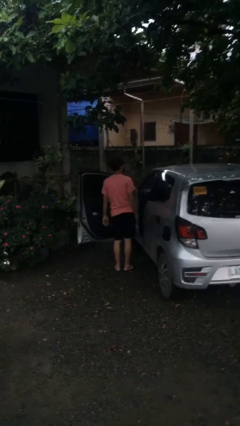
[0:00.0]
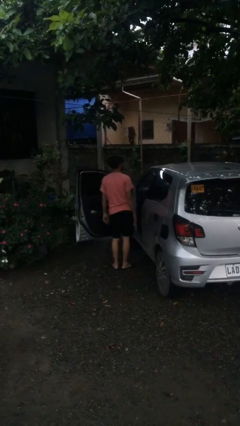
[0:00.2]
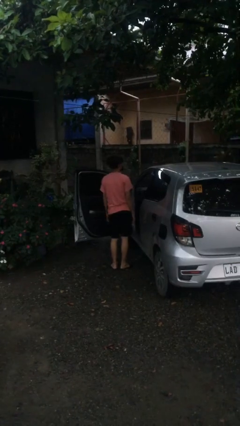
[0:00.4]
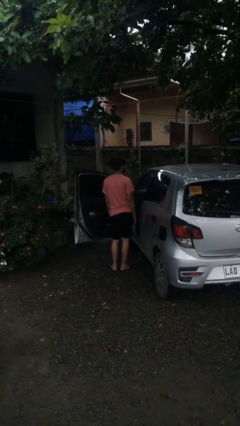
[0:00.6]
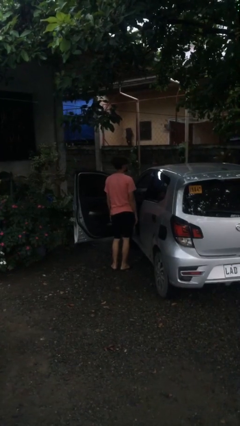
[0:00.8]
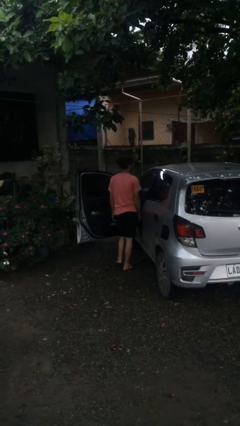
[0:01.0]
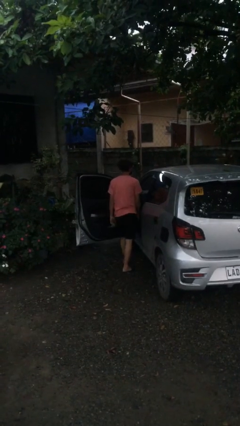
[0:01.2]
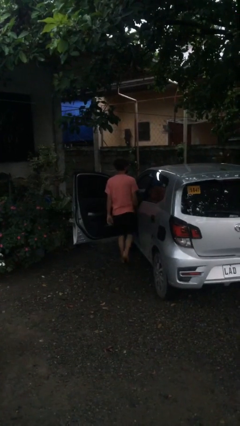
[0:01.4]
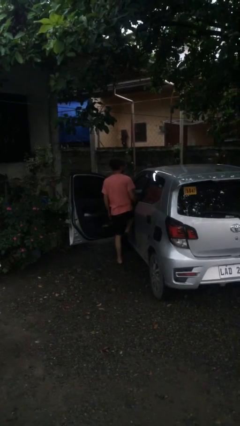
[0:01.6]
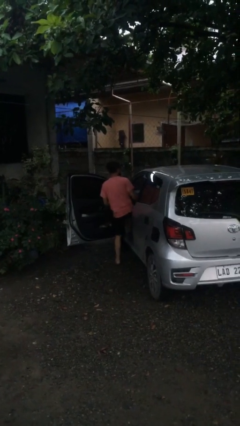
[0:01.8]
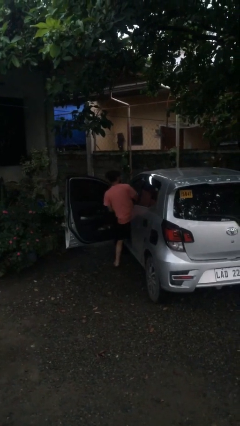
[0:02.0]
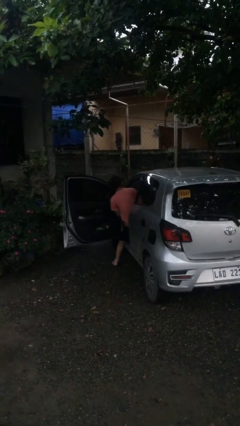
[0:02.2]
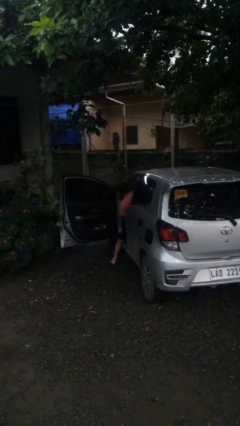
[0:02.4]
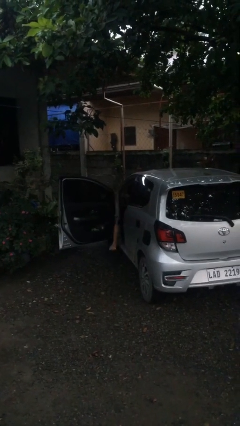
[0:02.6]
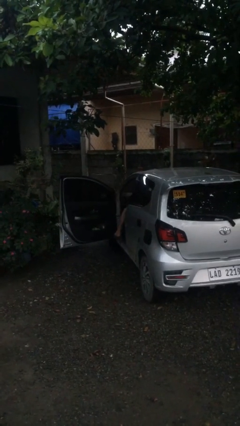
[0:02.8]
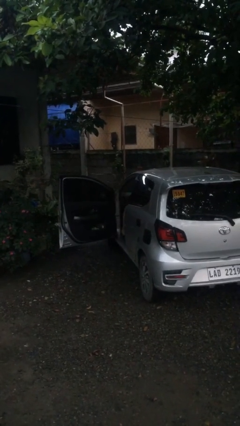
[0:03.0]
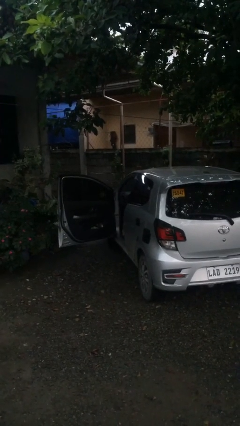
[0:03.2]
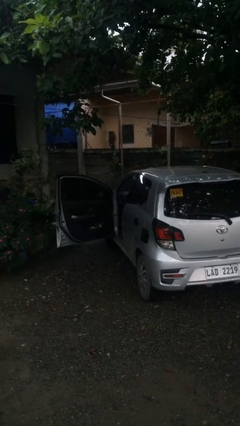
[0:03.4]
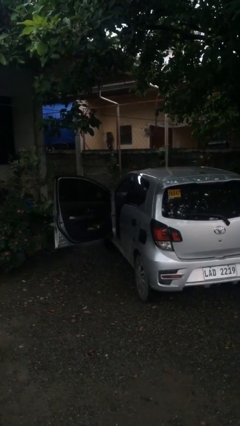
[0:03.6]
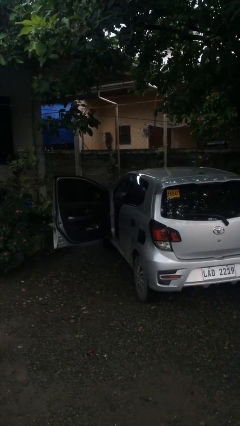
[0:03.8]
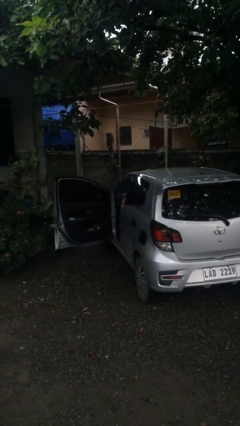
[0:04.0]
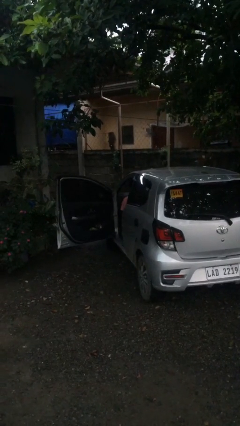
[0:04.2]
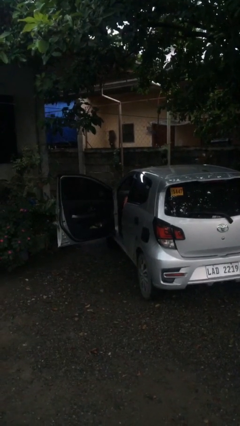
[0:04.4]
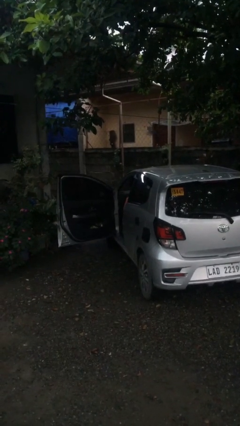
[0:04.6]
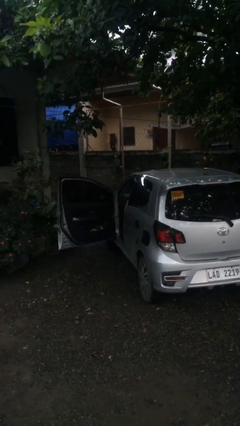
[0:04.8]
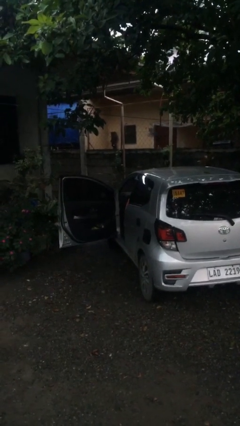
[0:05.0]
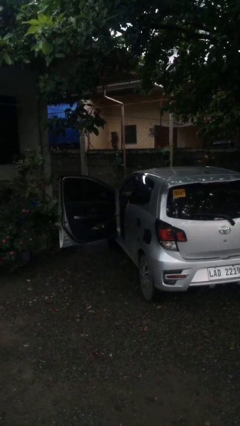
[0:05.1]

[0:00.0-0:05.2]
person enters car

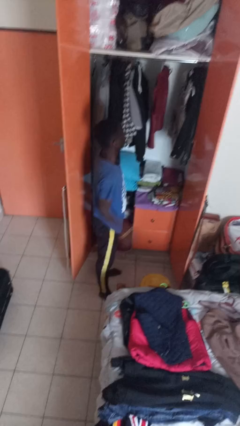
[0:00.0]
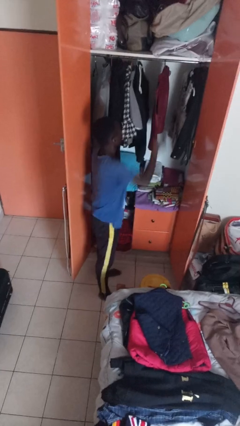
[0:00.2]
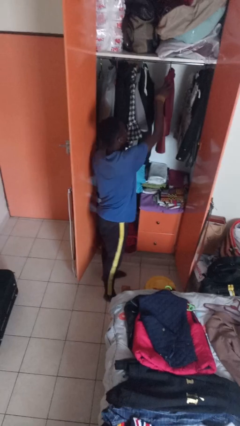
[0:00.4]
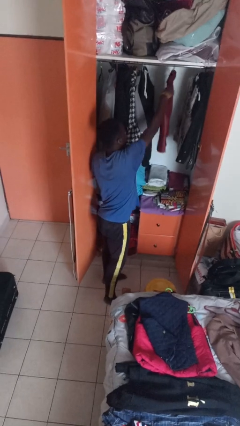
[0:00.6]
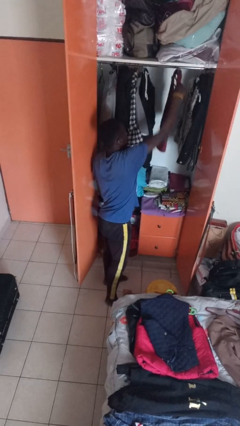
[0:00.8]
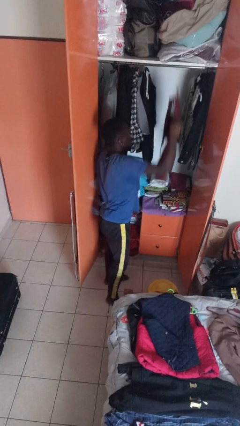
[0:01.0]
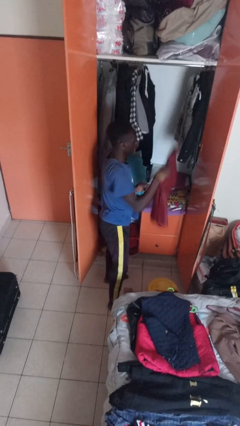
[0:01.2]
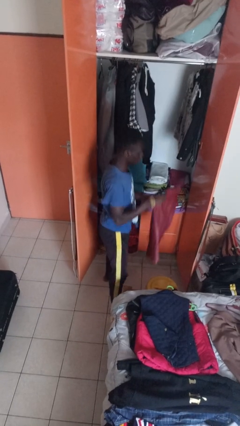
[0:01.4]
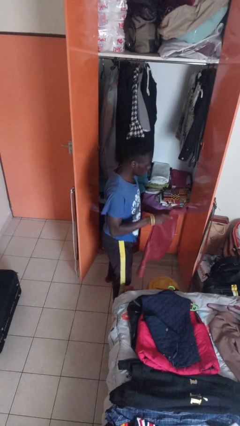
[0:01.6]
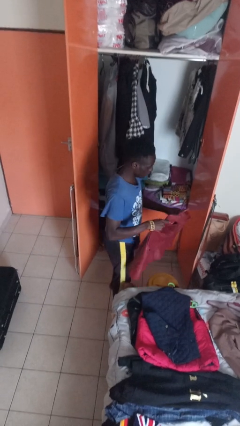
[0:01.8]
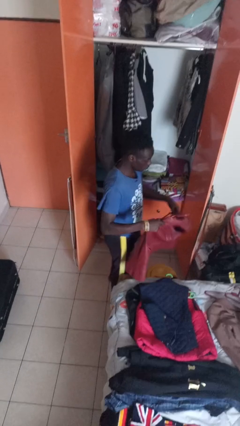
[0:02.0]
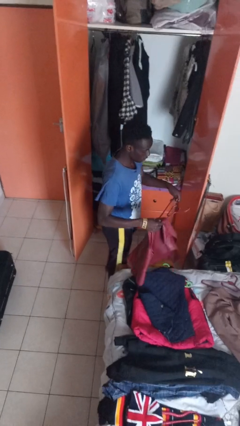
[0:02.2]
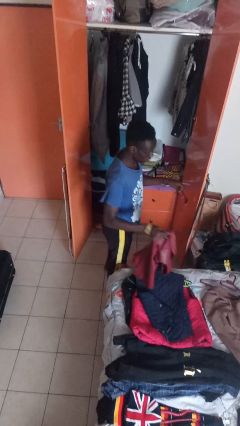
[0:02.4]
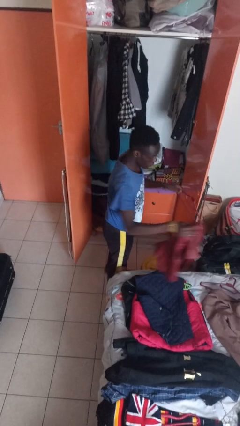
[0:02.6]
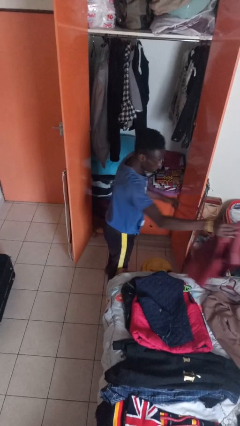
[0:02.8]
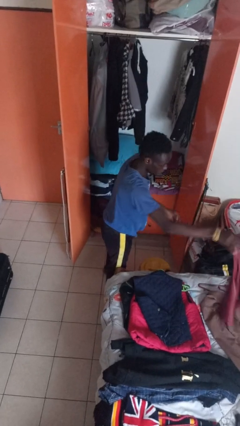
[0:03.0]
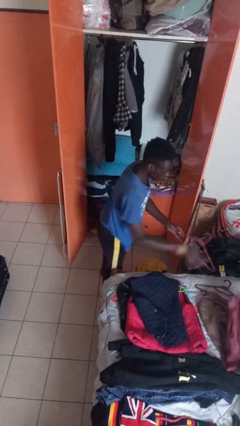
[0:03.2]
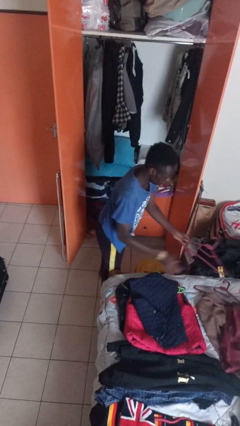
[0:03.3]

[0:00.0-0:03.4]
person takes clothes from closet

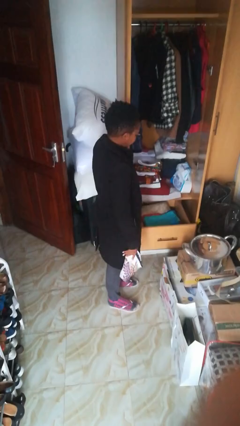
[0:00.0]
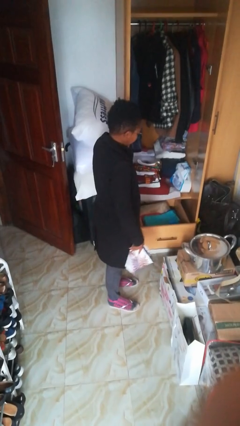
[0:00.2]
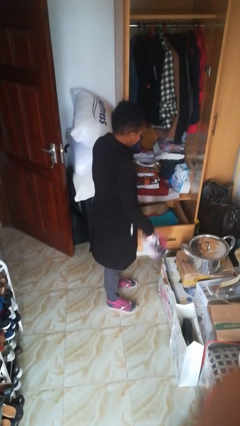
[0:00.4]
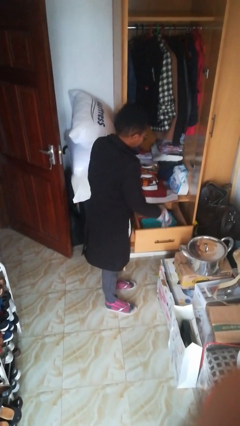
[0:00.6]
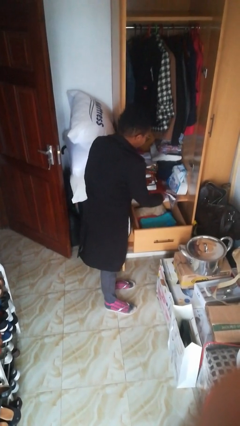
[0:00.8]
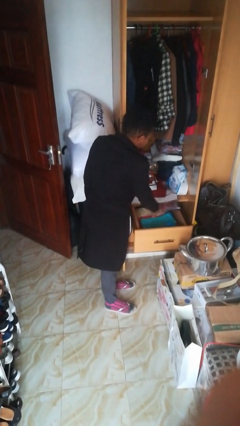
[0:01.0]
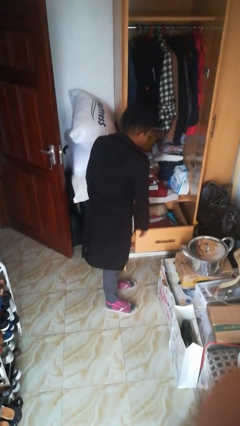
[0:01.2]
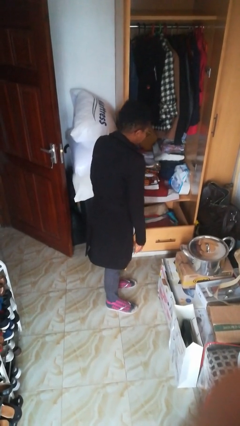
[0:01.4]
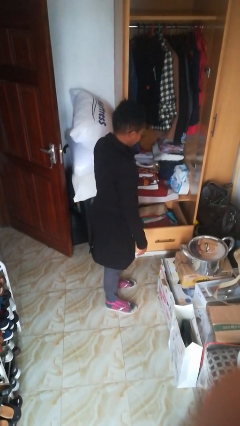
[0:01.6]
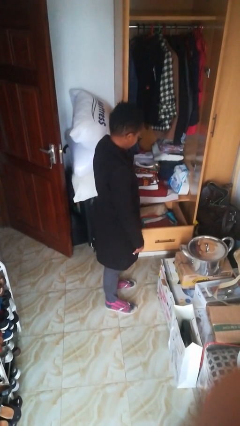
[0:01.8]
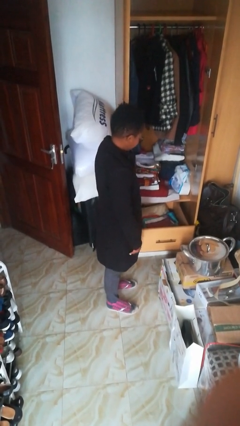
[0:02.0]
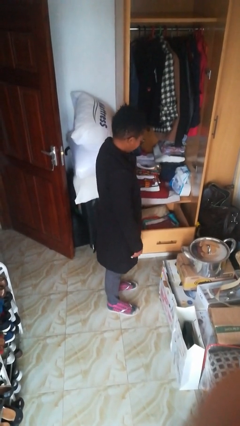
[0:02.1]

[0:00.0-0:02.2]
person puts clothes into dresser

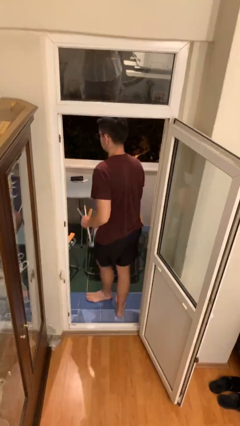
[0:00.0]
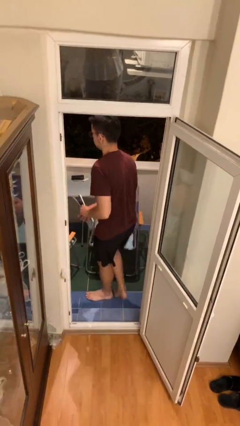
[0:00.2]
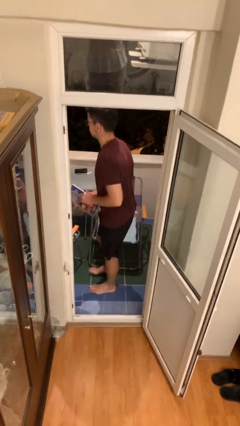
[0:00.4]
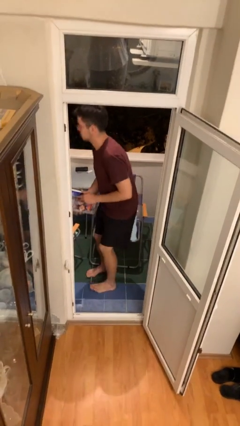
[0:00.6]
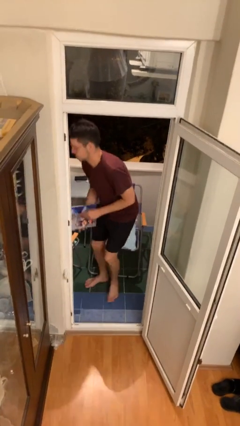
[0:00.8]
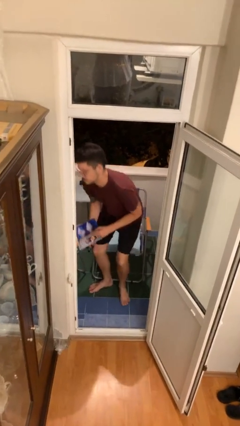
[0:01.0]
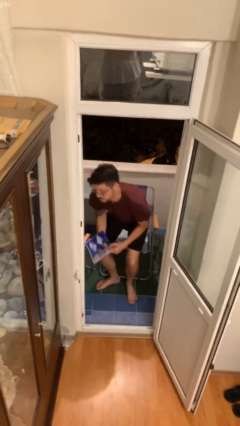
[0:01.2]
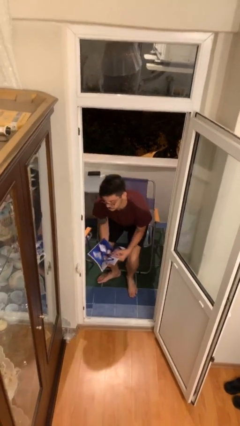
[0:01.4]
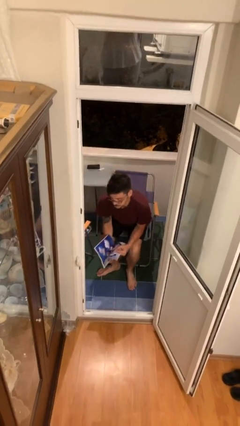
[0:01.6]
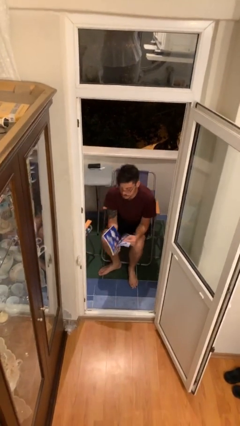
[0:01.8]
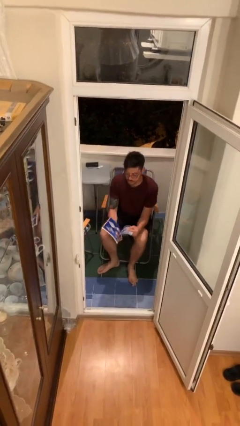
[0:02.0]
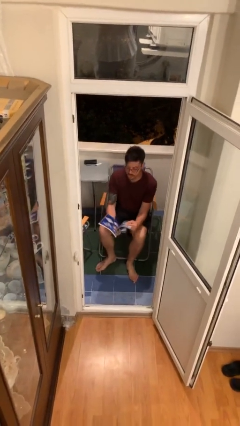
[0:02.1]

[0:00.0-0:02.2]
person sits down

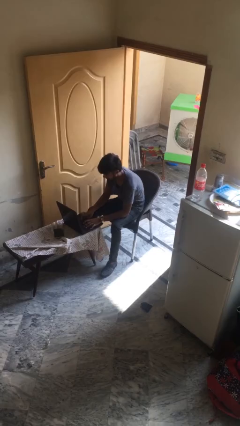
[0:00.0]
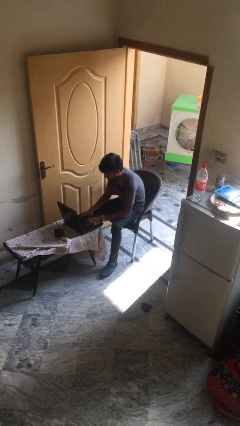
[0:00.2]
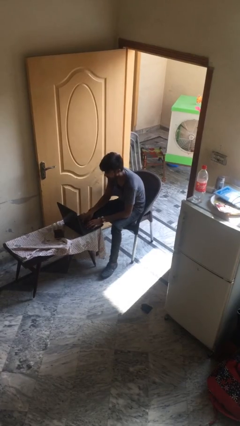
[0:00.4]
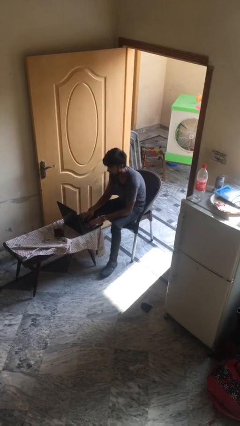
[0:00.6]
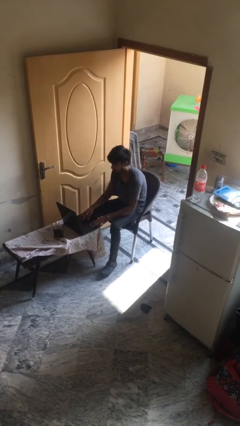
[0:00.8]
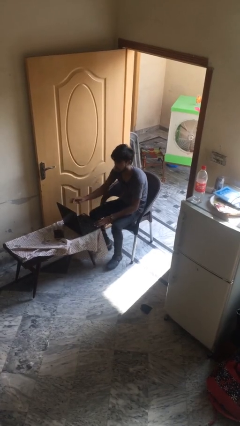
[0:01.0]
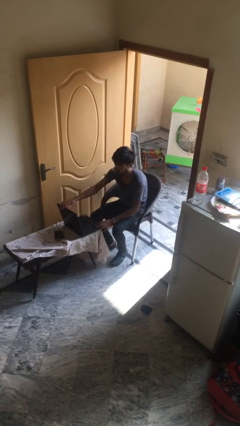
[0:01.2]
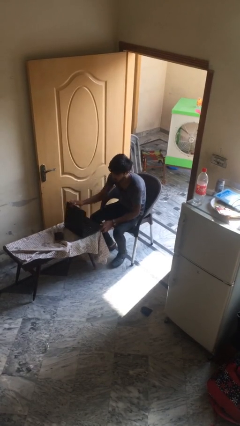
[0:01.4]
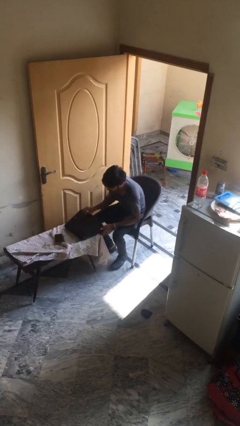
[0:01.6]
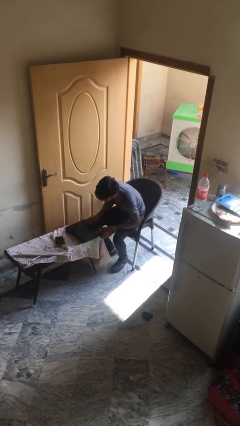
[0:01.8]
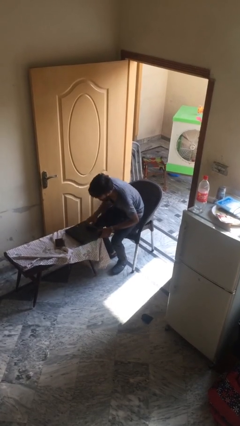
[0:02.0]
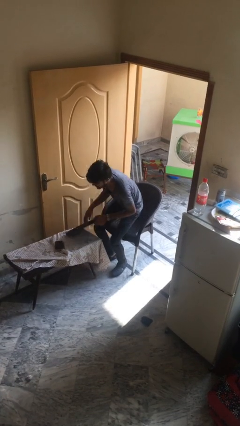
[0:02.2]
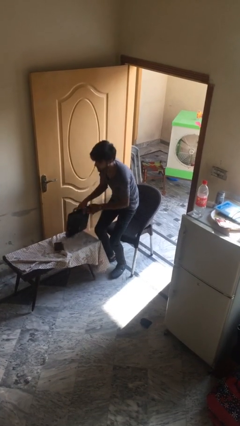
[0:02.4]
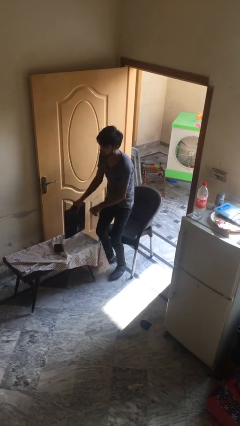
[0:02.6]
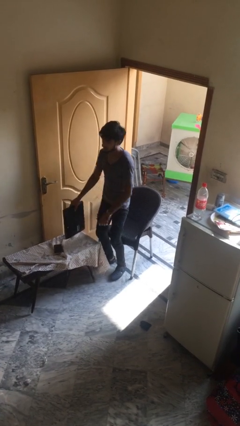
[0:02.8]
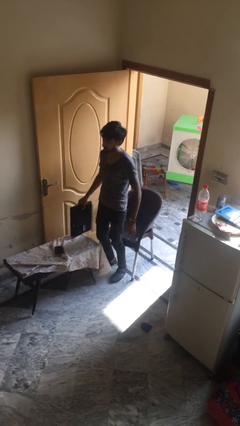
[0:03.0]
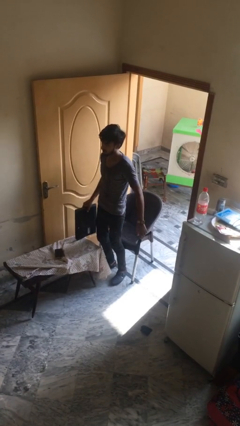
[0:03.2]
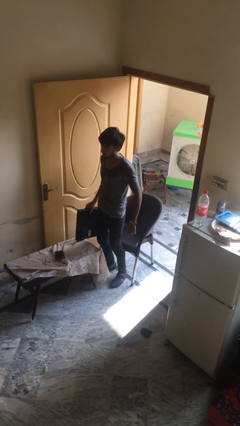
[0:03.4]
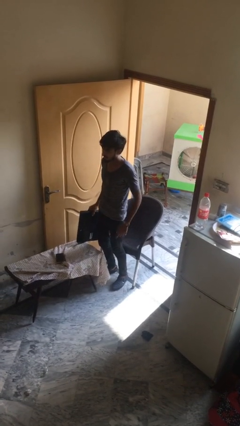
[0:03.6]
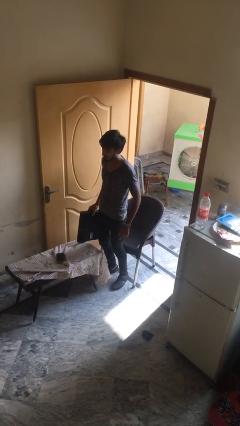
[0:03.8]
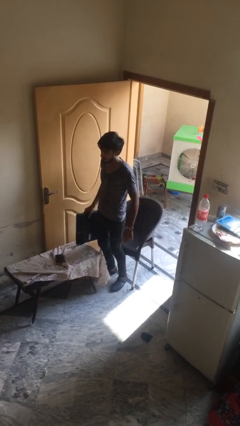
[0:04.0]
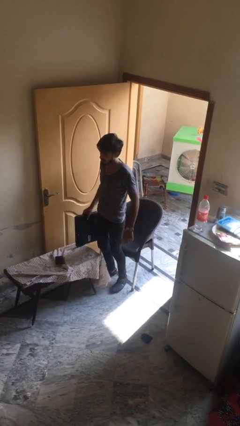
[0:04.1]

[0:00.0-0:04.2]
person stands up

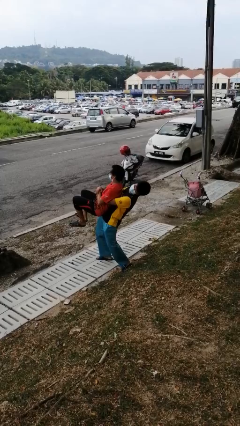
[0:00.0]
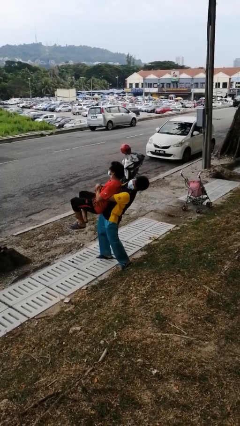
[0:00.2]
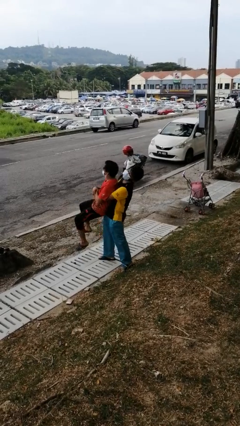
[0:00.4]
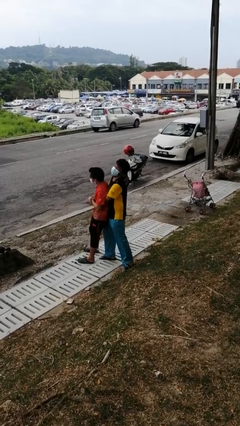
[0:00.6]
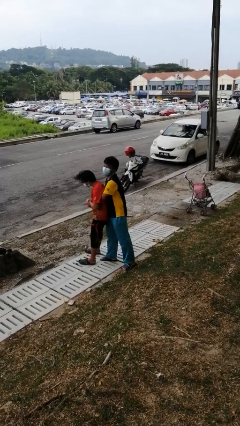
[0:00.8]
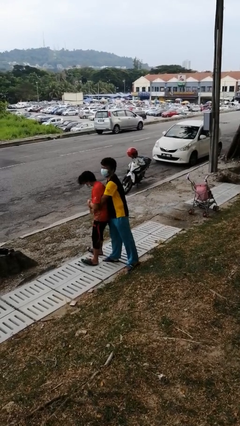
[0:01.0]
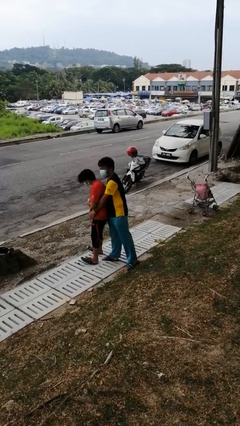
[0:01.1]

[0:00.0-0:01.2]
person puts down person
